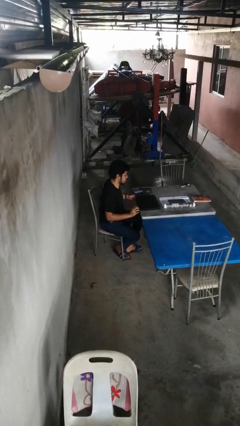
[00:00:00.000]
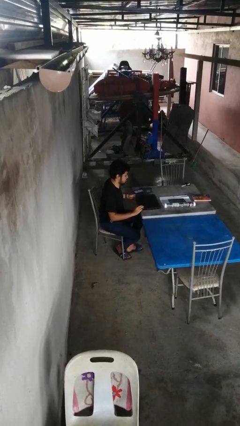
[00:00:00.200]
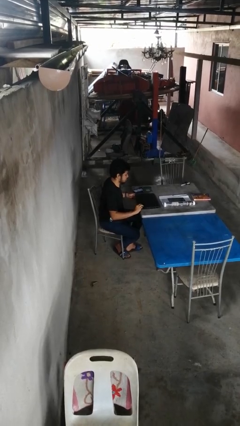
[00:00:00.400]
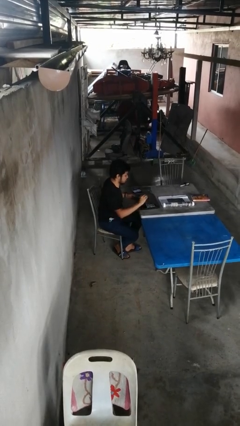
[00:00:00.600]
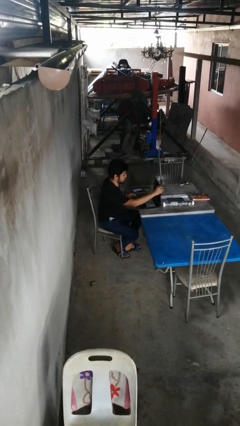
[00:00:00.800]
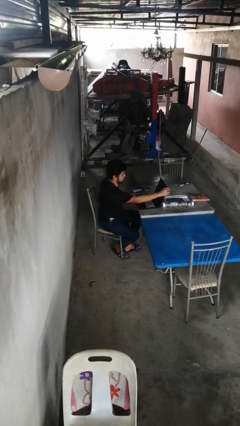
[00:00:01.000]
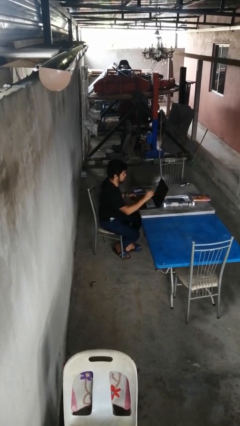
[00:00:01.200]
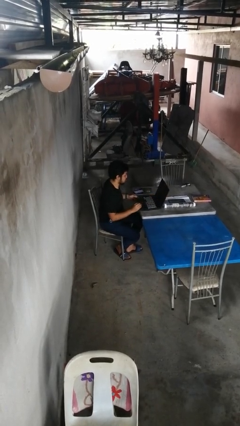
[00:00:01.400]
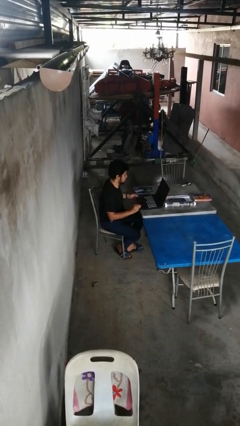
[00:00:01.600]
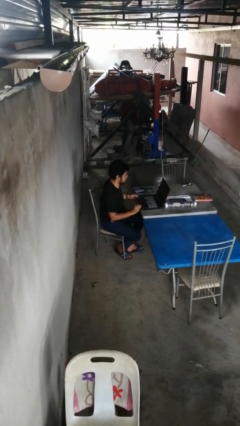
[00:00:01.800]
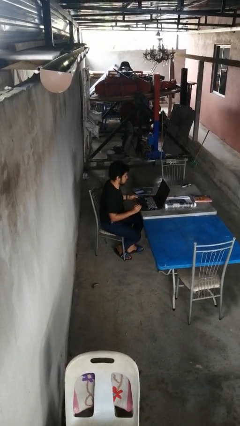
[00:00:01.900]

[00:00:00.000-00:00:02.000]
person opens laptop

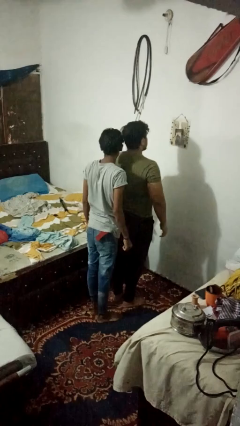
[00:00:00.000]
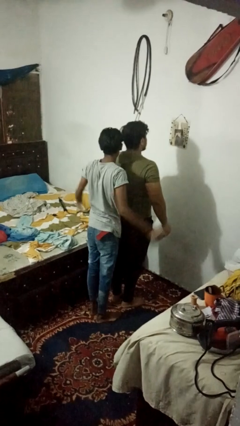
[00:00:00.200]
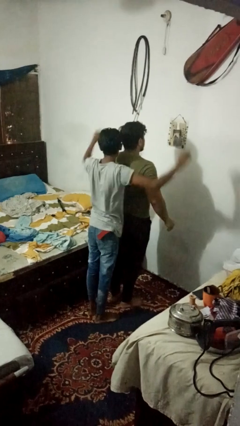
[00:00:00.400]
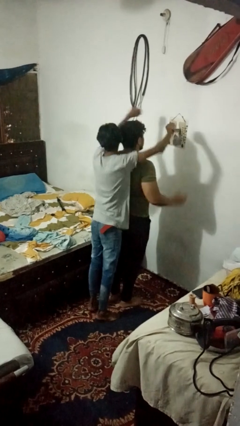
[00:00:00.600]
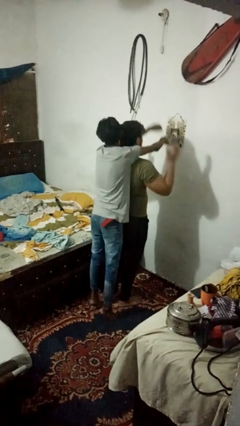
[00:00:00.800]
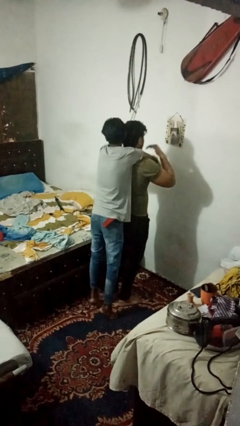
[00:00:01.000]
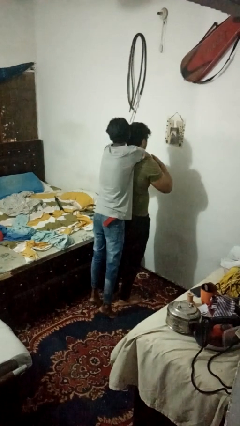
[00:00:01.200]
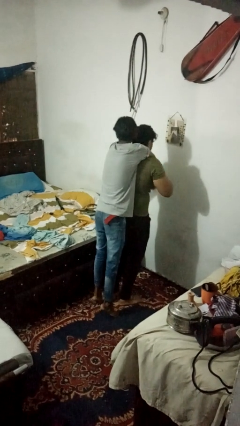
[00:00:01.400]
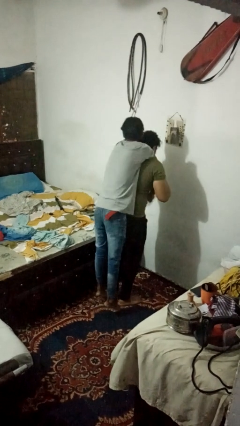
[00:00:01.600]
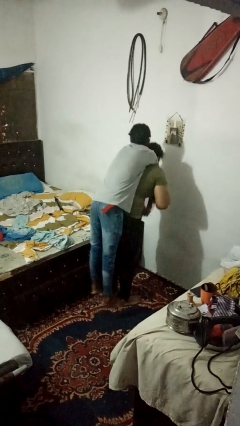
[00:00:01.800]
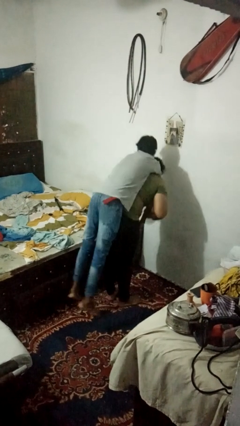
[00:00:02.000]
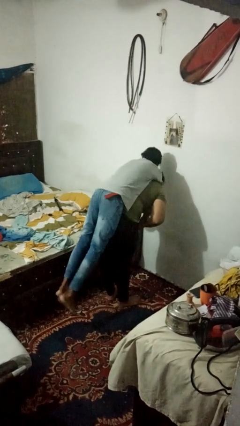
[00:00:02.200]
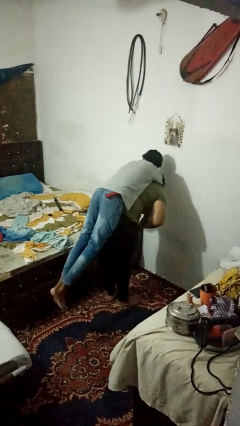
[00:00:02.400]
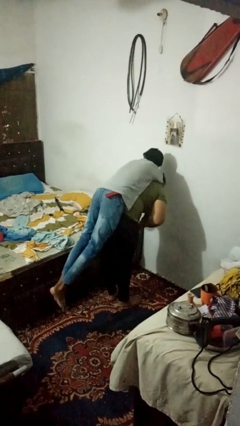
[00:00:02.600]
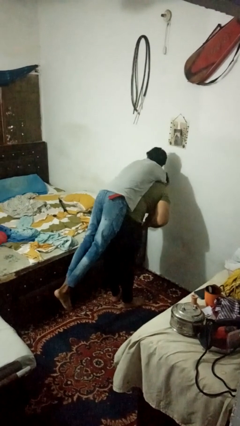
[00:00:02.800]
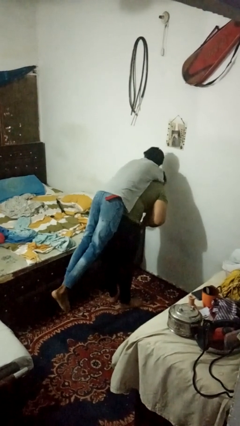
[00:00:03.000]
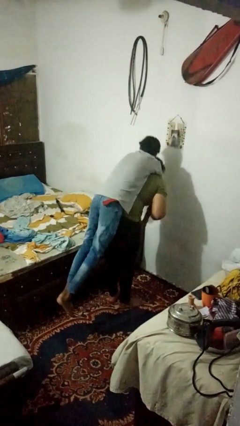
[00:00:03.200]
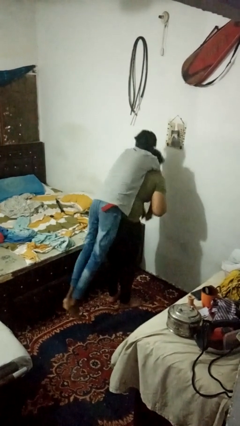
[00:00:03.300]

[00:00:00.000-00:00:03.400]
person carries person on shoulders

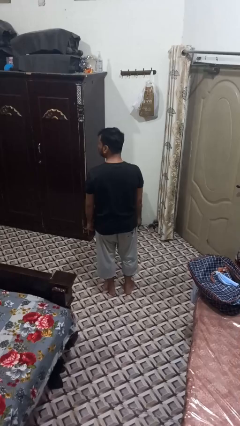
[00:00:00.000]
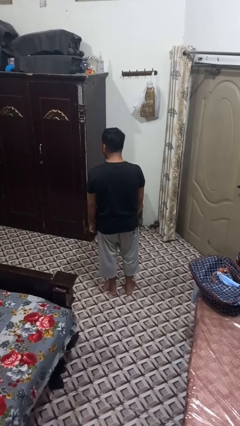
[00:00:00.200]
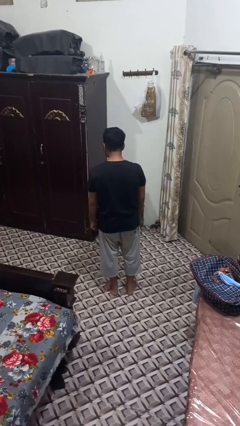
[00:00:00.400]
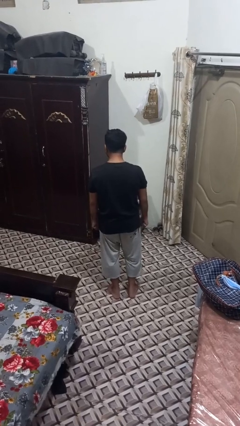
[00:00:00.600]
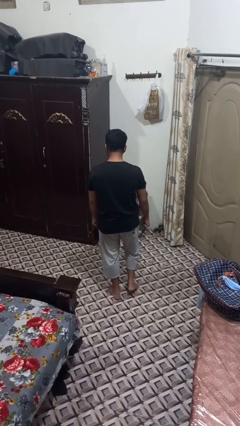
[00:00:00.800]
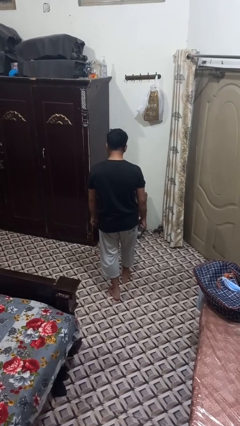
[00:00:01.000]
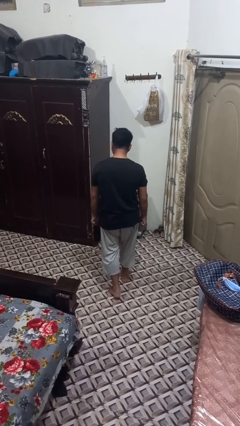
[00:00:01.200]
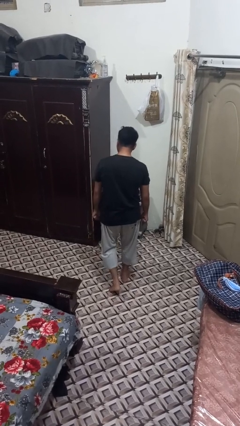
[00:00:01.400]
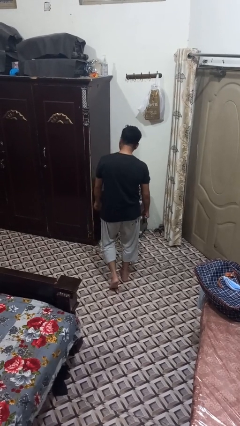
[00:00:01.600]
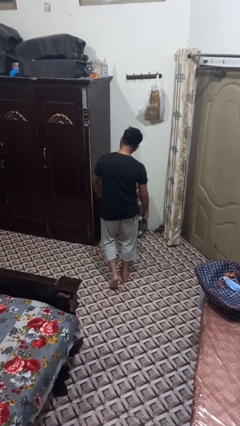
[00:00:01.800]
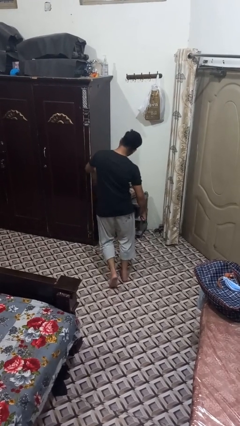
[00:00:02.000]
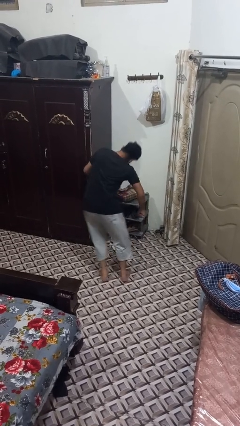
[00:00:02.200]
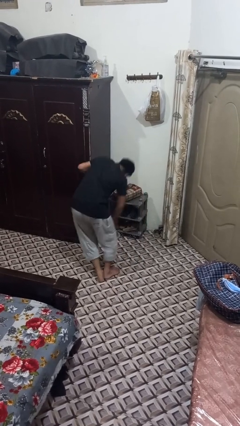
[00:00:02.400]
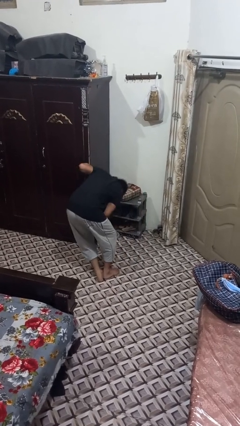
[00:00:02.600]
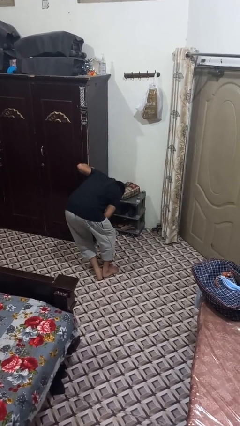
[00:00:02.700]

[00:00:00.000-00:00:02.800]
person trips on object on floor

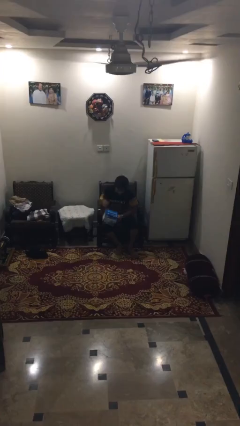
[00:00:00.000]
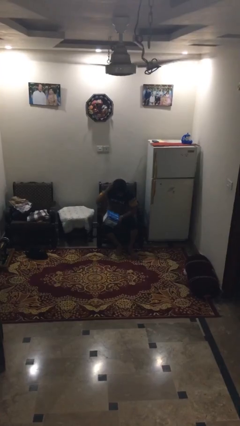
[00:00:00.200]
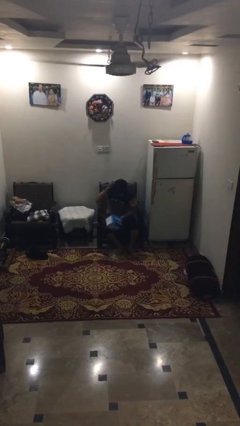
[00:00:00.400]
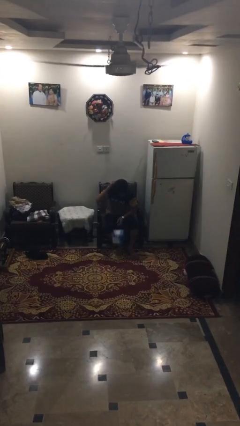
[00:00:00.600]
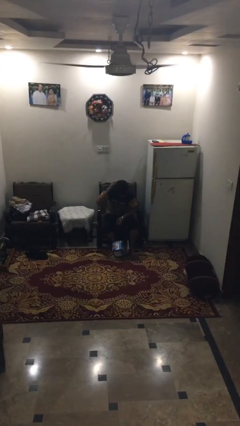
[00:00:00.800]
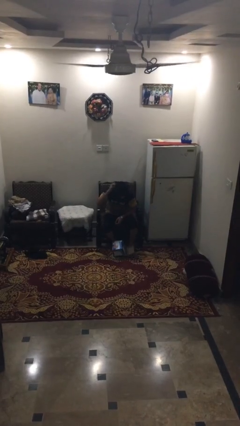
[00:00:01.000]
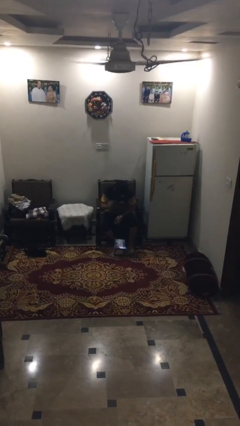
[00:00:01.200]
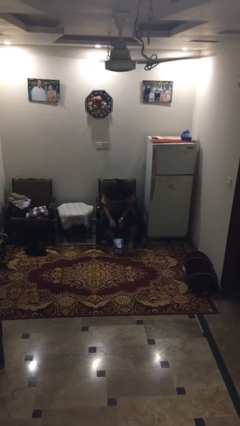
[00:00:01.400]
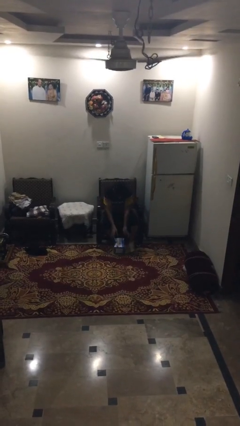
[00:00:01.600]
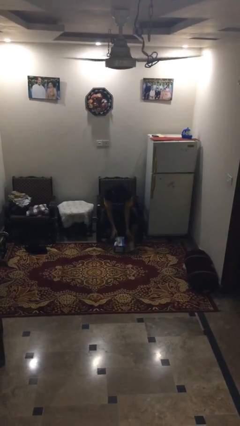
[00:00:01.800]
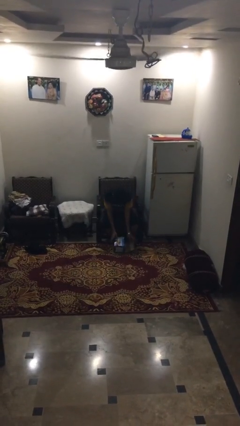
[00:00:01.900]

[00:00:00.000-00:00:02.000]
person drops object

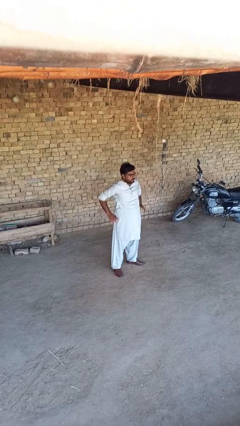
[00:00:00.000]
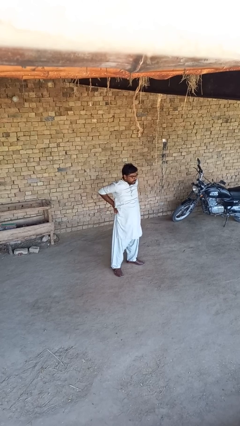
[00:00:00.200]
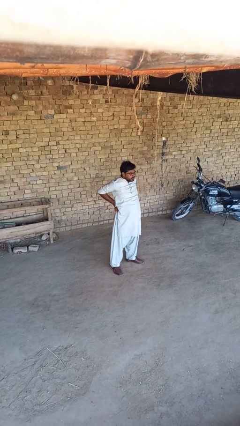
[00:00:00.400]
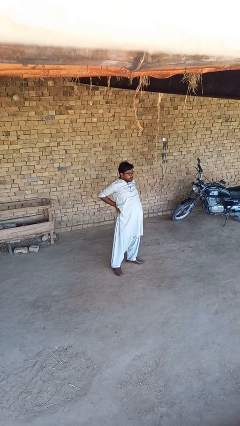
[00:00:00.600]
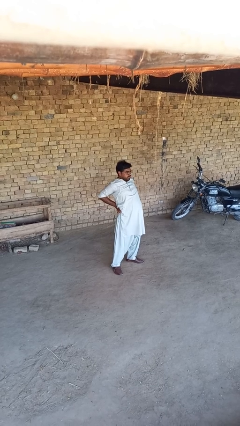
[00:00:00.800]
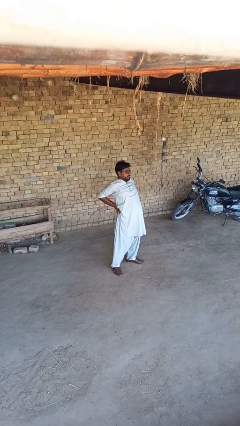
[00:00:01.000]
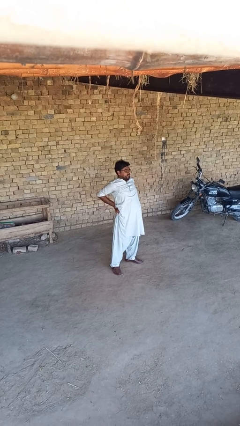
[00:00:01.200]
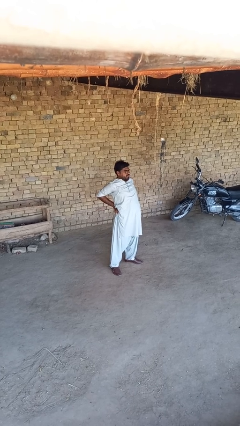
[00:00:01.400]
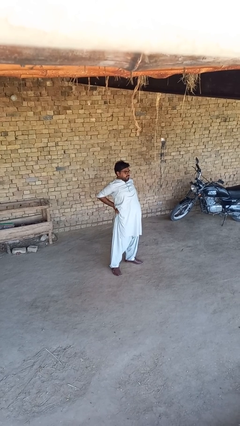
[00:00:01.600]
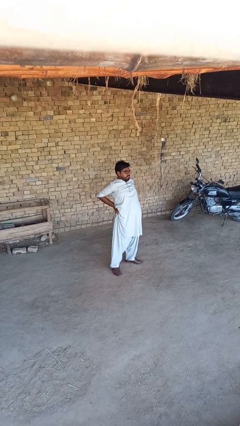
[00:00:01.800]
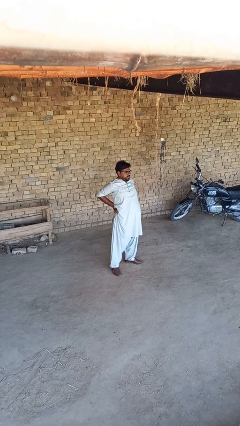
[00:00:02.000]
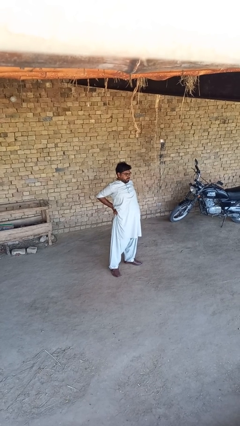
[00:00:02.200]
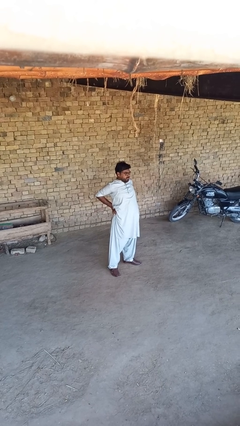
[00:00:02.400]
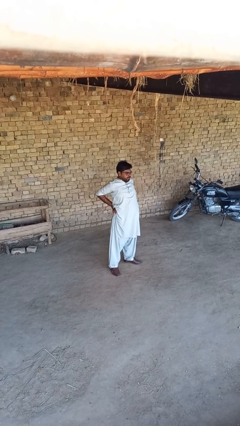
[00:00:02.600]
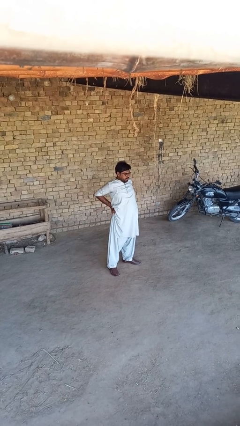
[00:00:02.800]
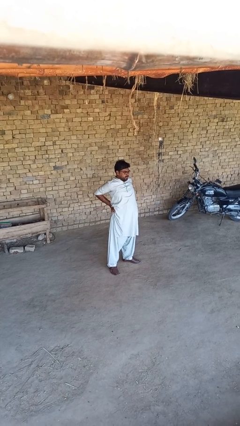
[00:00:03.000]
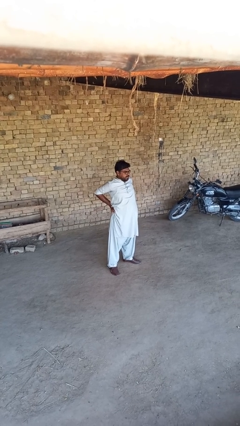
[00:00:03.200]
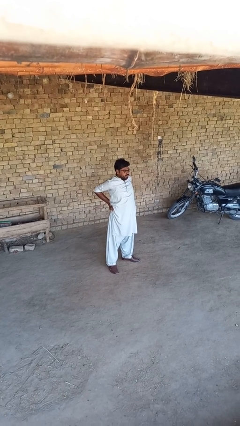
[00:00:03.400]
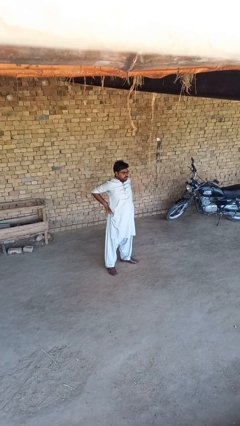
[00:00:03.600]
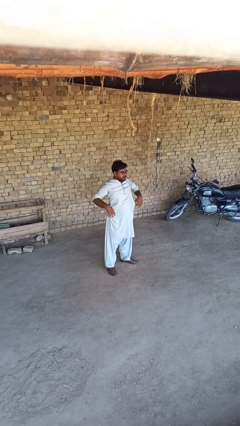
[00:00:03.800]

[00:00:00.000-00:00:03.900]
person stretches back

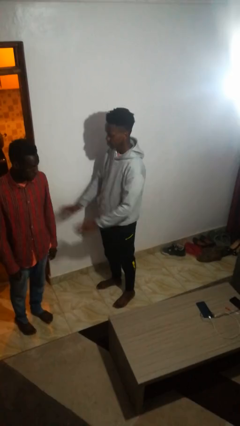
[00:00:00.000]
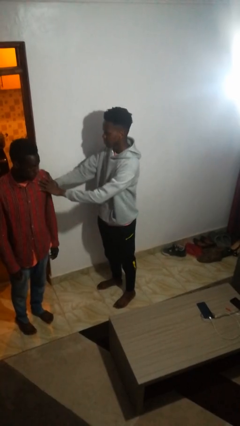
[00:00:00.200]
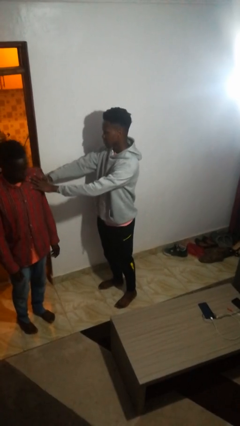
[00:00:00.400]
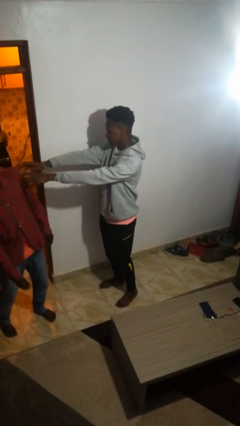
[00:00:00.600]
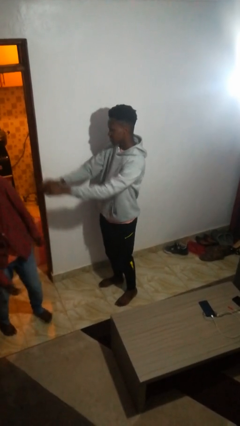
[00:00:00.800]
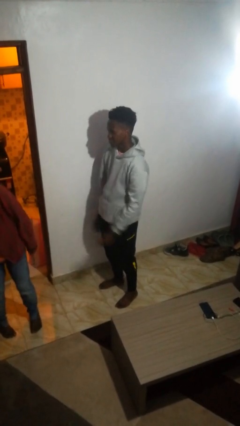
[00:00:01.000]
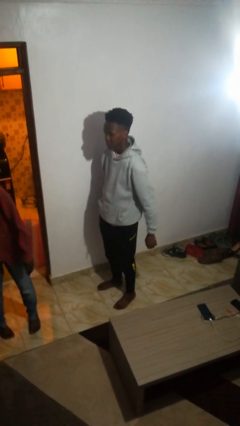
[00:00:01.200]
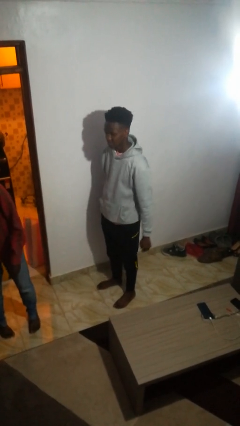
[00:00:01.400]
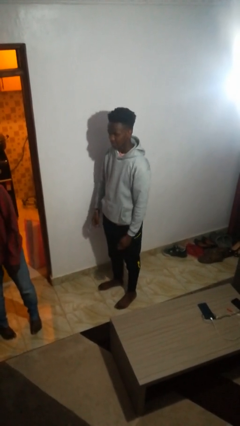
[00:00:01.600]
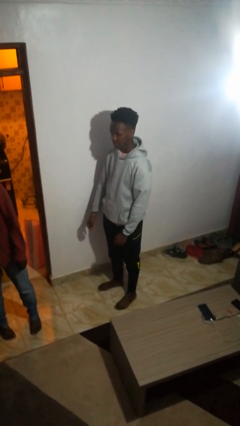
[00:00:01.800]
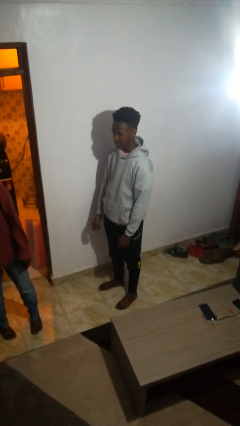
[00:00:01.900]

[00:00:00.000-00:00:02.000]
person shoves person

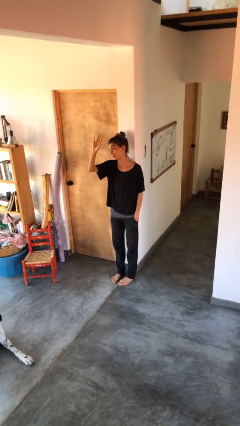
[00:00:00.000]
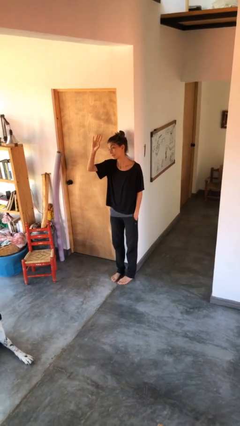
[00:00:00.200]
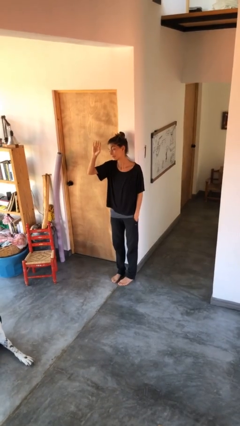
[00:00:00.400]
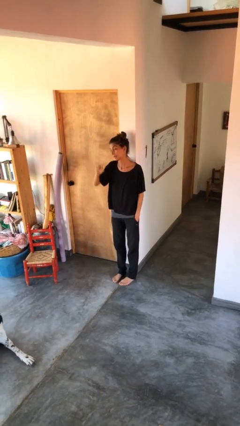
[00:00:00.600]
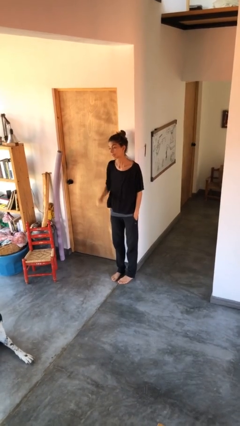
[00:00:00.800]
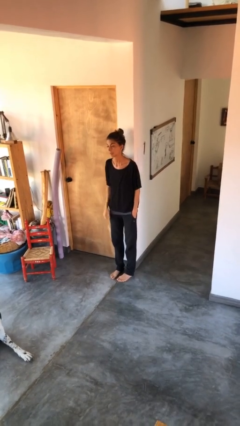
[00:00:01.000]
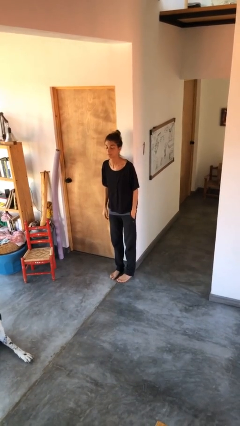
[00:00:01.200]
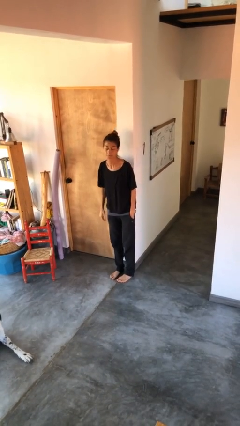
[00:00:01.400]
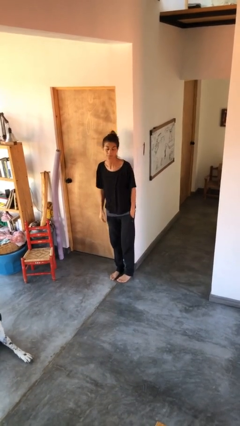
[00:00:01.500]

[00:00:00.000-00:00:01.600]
person gestures lower hand
